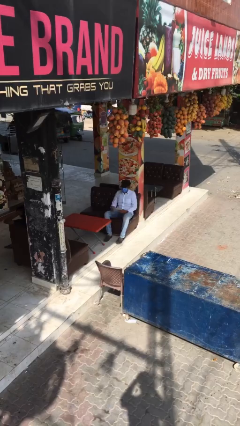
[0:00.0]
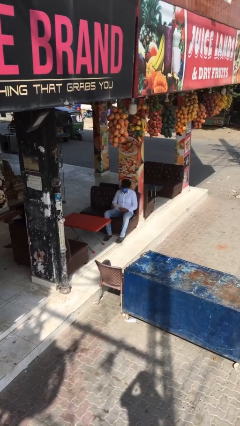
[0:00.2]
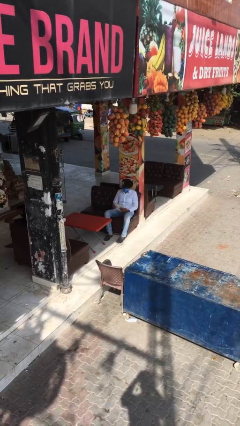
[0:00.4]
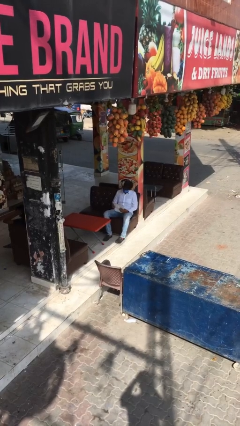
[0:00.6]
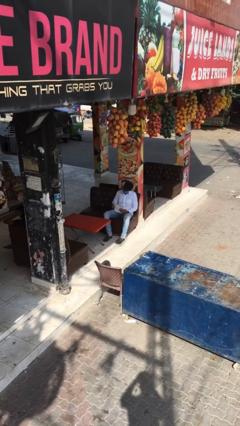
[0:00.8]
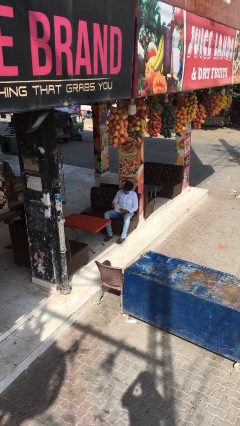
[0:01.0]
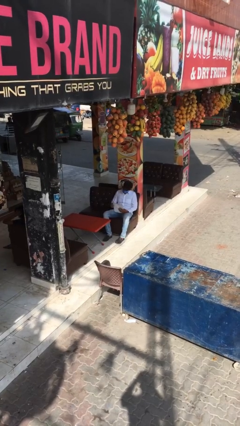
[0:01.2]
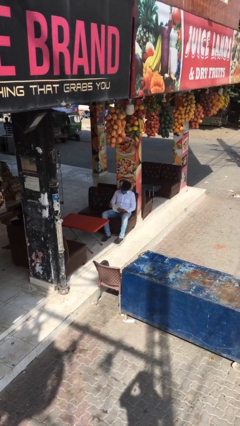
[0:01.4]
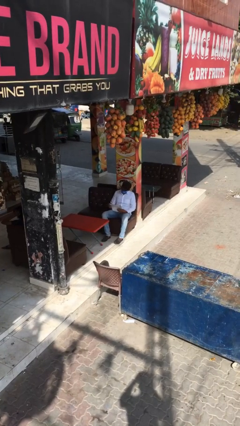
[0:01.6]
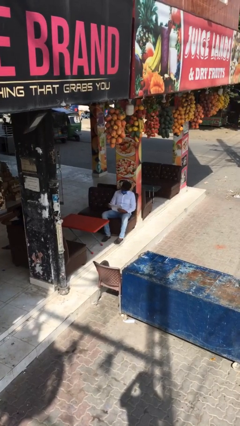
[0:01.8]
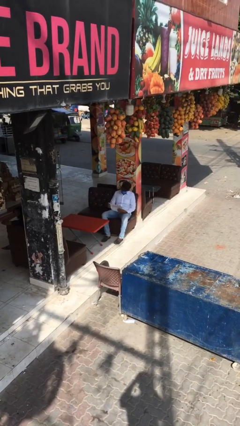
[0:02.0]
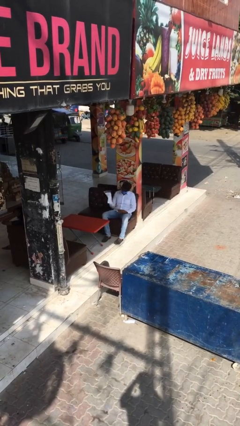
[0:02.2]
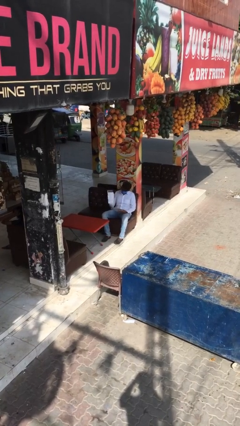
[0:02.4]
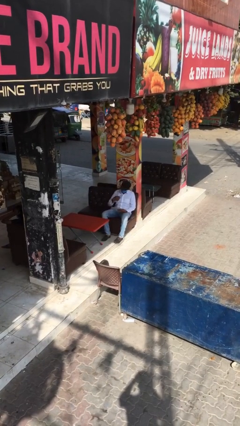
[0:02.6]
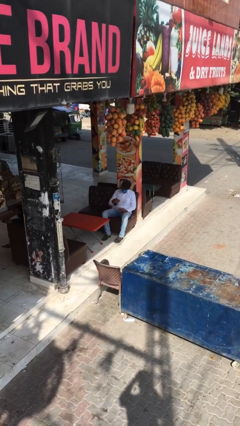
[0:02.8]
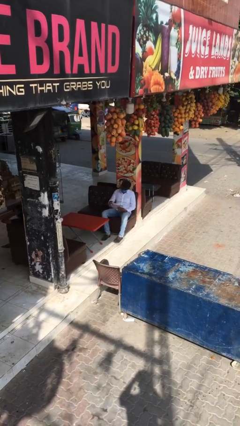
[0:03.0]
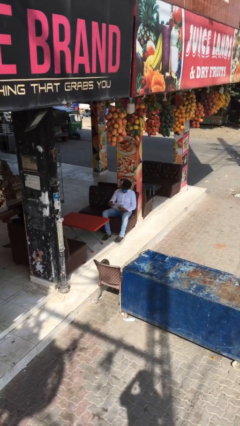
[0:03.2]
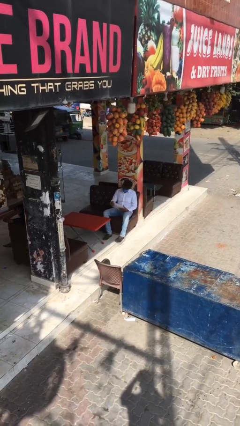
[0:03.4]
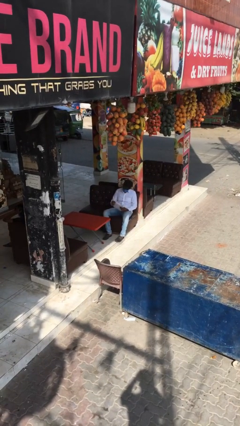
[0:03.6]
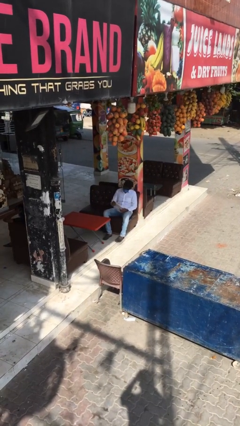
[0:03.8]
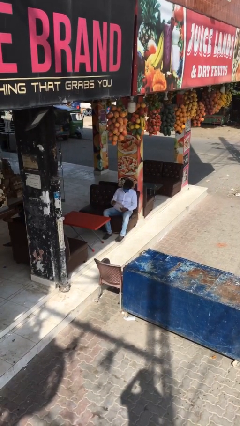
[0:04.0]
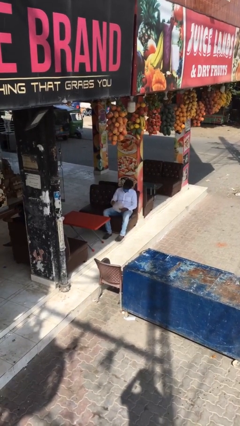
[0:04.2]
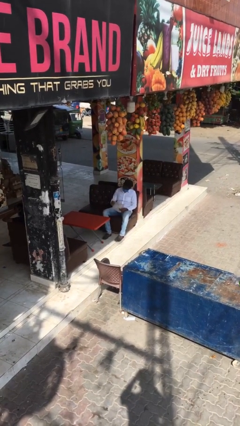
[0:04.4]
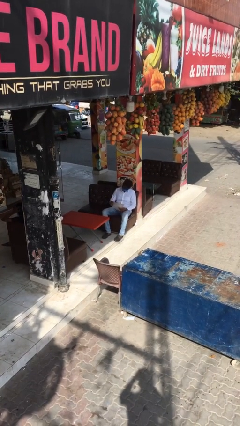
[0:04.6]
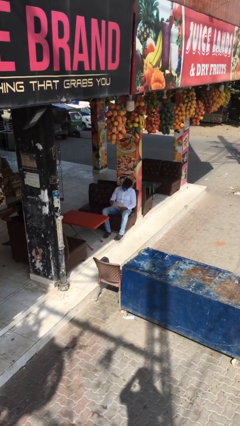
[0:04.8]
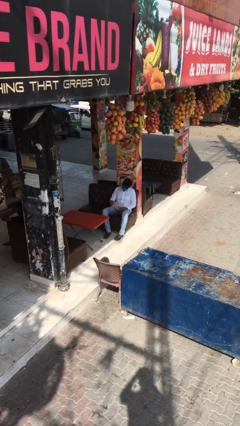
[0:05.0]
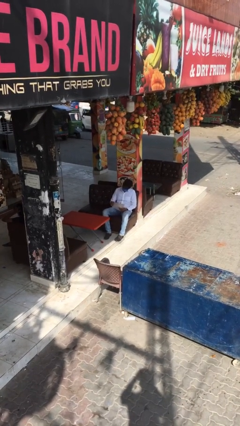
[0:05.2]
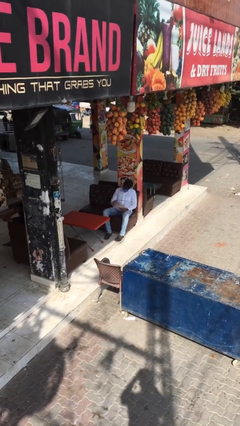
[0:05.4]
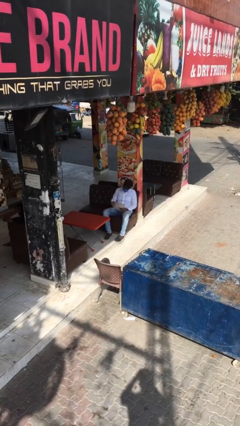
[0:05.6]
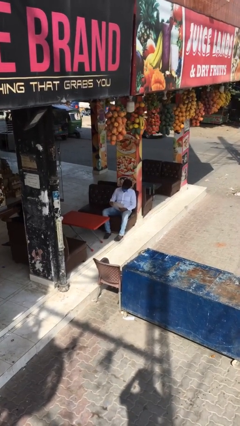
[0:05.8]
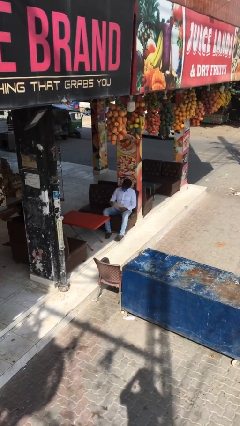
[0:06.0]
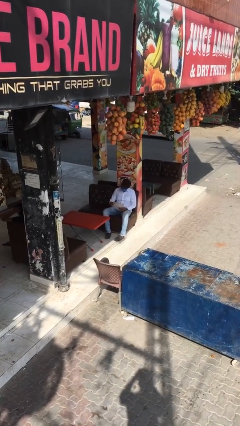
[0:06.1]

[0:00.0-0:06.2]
person reads document

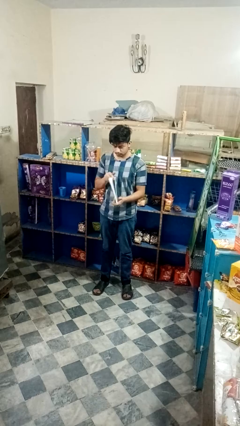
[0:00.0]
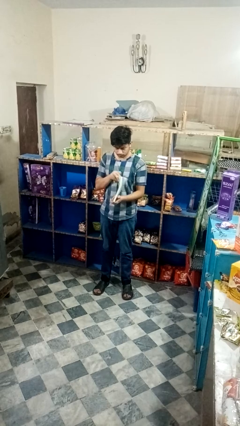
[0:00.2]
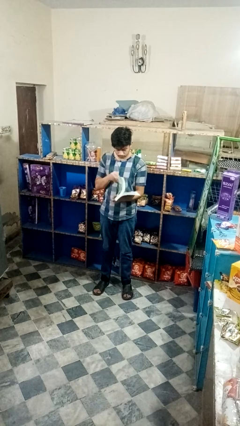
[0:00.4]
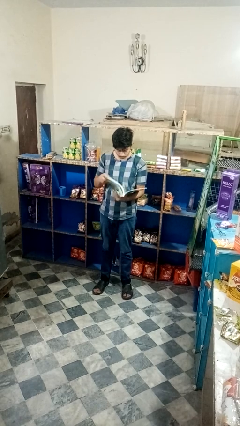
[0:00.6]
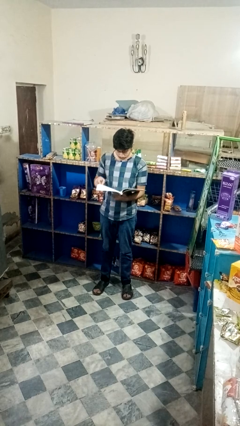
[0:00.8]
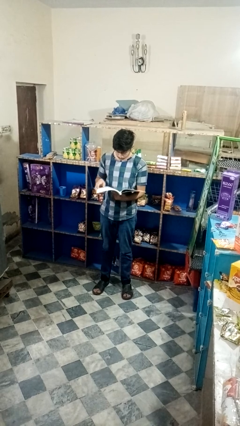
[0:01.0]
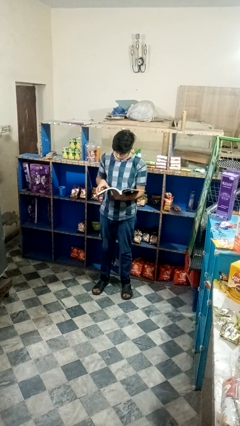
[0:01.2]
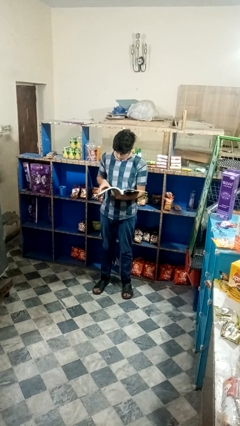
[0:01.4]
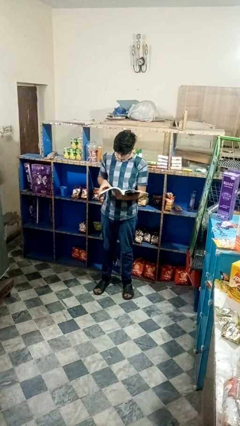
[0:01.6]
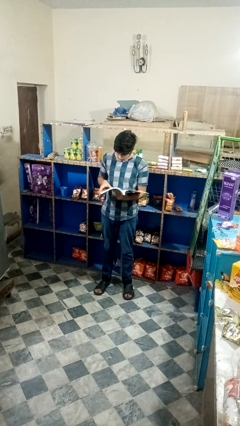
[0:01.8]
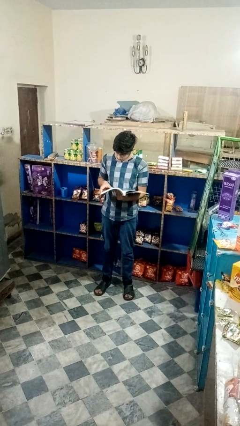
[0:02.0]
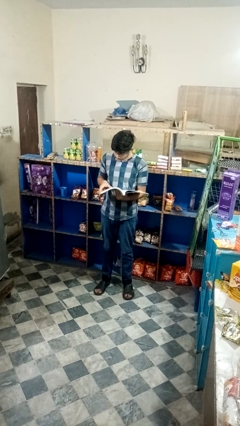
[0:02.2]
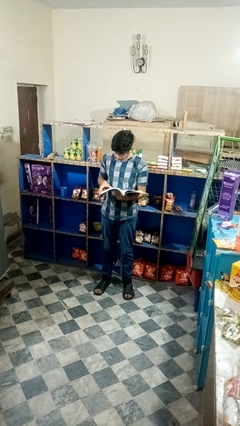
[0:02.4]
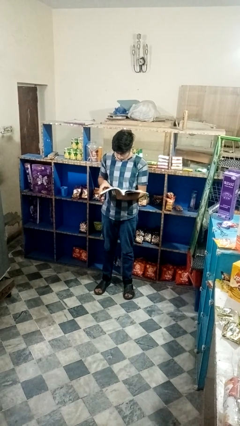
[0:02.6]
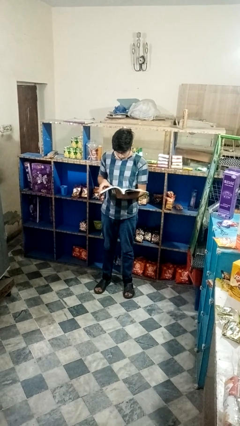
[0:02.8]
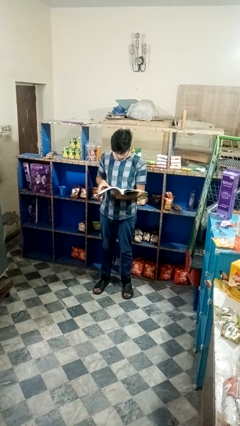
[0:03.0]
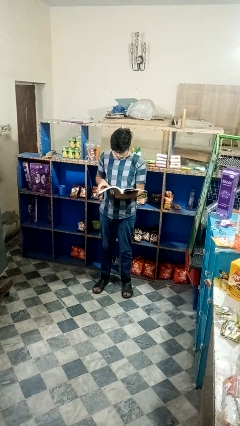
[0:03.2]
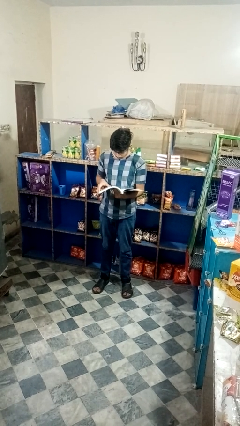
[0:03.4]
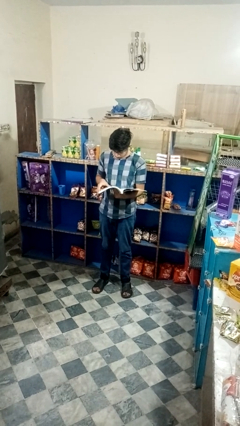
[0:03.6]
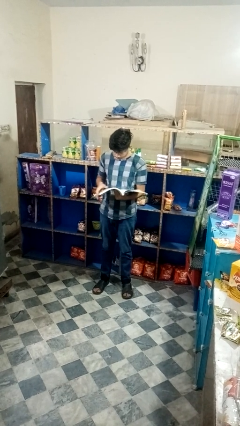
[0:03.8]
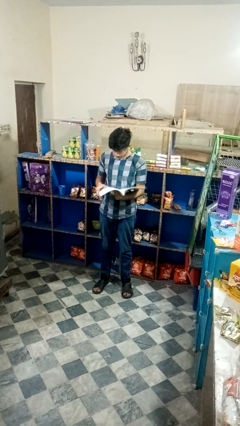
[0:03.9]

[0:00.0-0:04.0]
person reads magazine

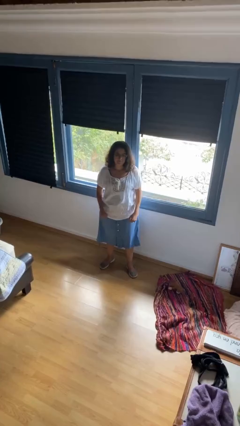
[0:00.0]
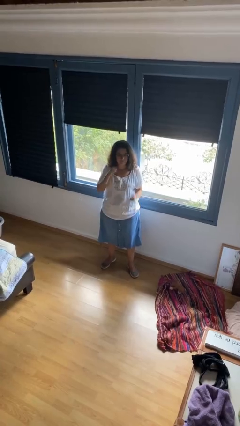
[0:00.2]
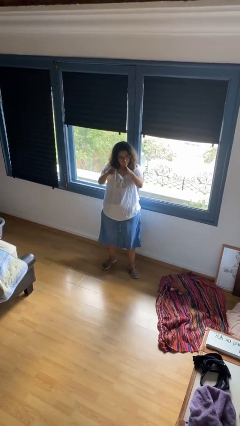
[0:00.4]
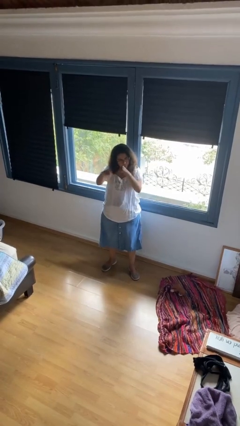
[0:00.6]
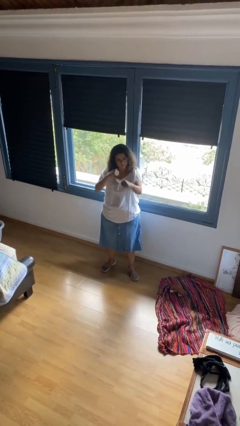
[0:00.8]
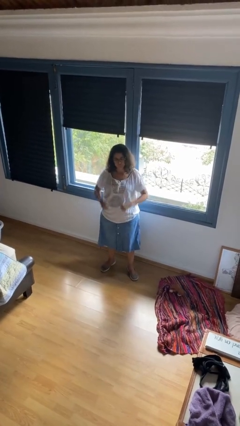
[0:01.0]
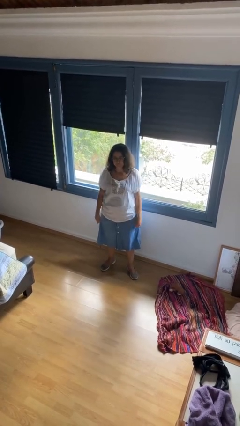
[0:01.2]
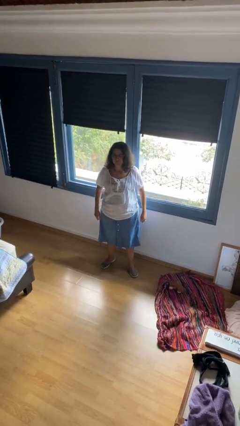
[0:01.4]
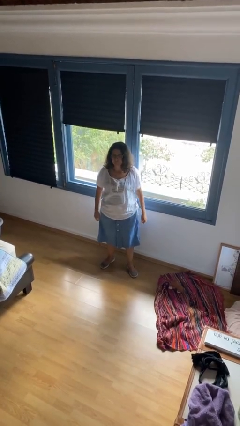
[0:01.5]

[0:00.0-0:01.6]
person punches

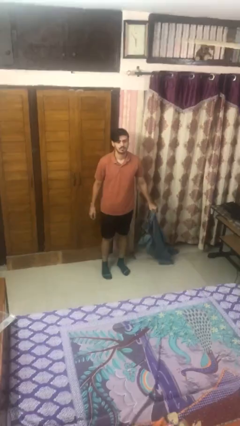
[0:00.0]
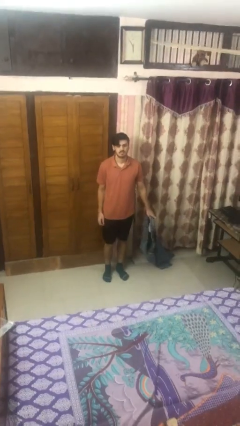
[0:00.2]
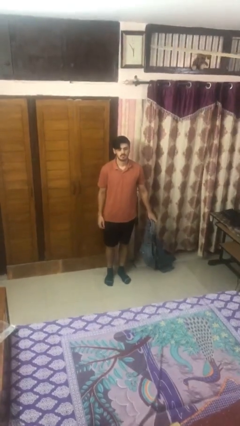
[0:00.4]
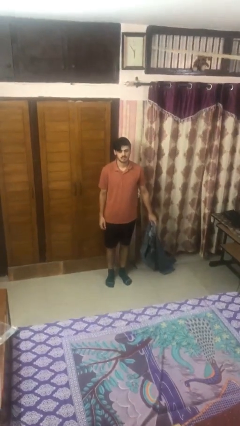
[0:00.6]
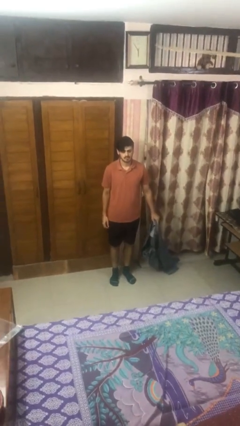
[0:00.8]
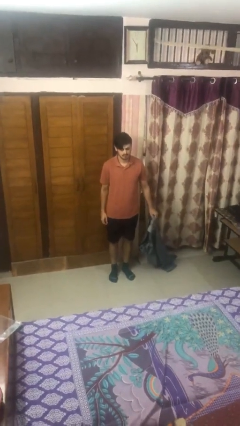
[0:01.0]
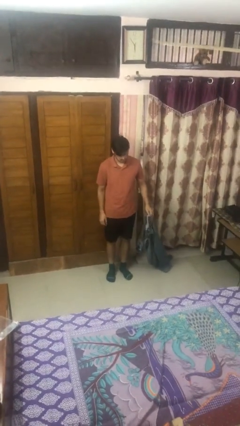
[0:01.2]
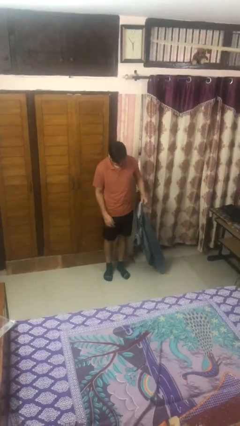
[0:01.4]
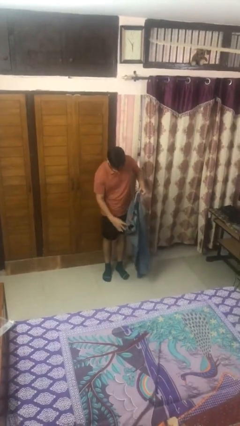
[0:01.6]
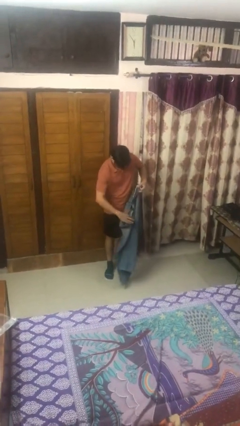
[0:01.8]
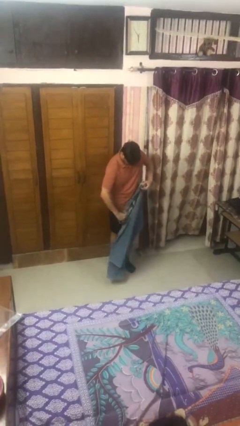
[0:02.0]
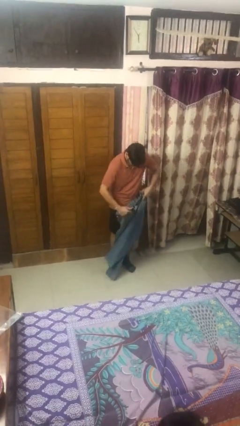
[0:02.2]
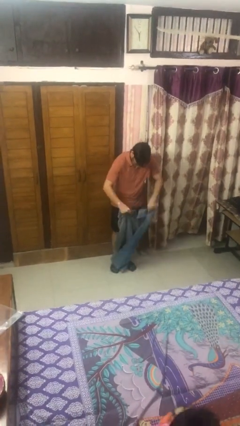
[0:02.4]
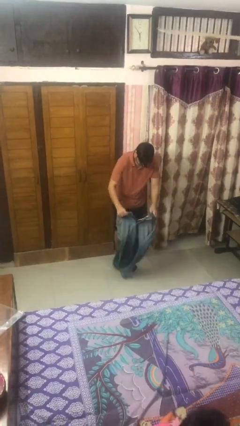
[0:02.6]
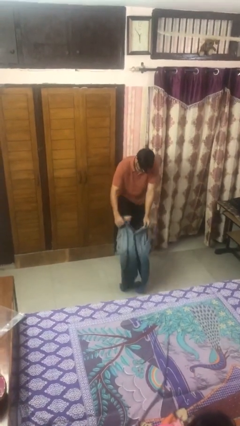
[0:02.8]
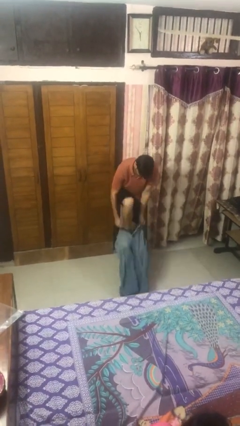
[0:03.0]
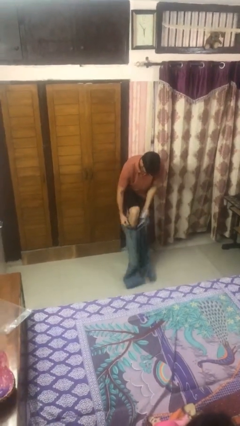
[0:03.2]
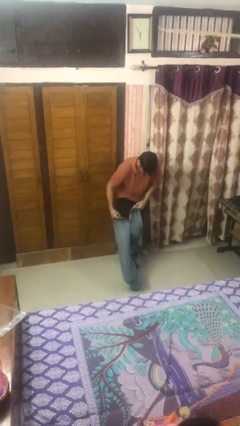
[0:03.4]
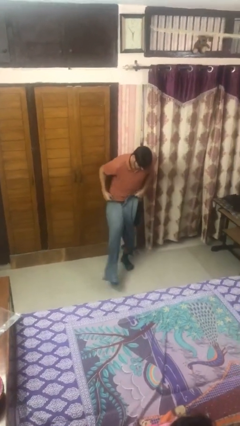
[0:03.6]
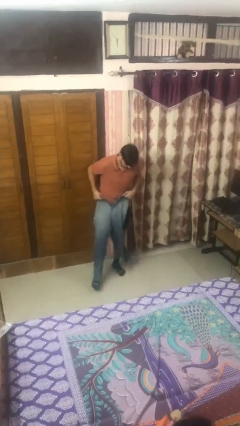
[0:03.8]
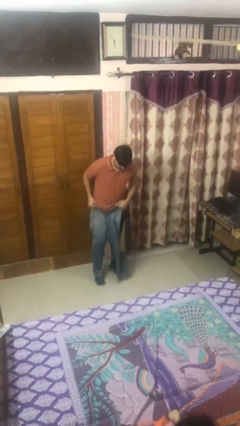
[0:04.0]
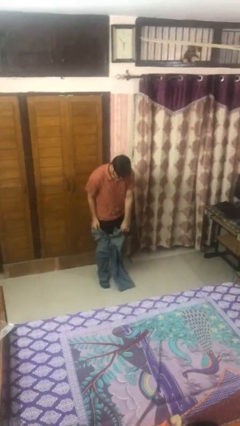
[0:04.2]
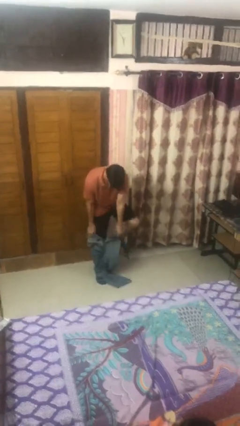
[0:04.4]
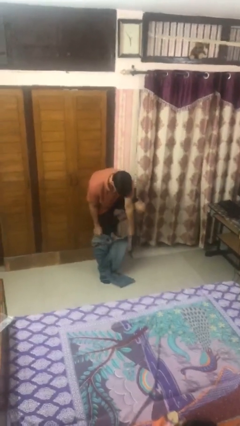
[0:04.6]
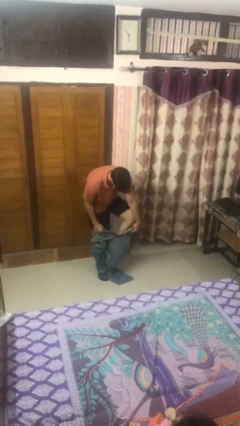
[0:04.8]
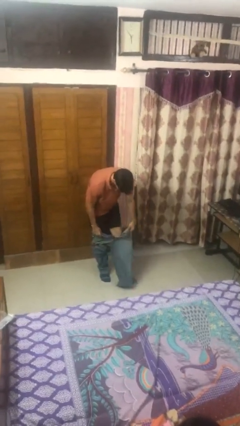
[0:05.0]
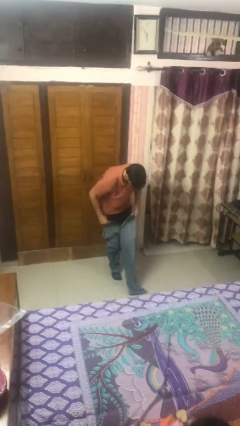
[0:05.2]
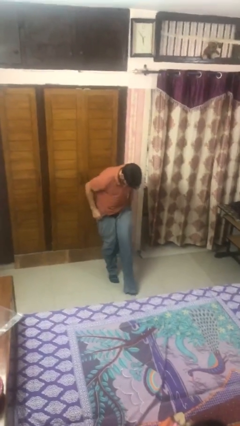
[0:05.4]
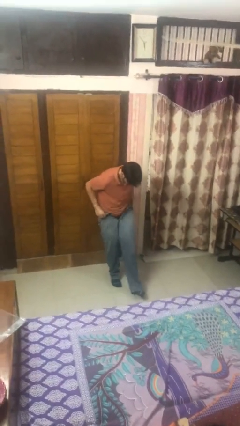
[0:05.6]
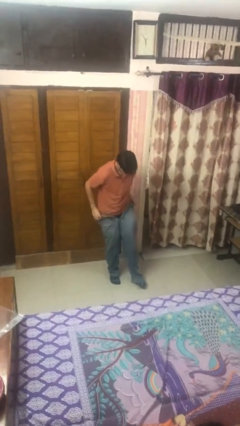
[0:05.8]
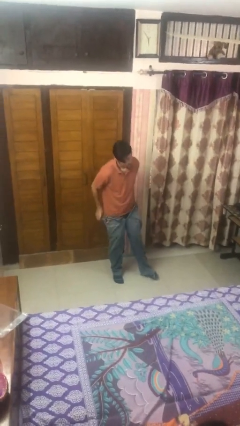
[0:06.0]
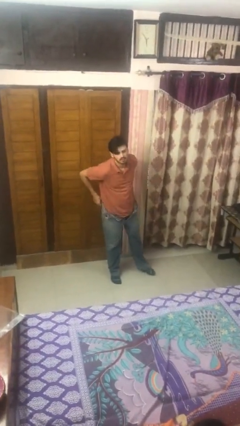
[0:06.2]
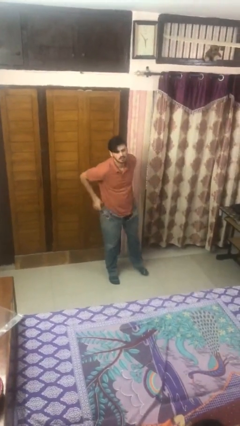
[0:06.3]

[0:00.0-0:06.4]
person puts on pants
